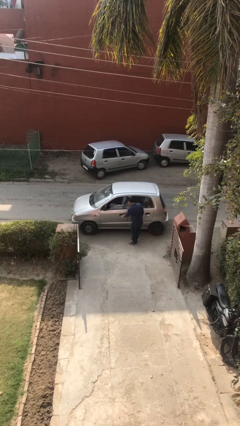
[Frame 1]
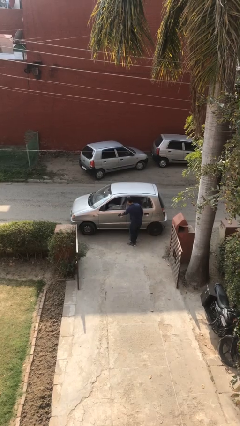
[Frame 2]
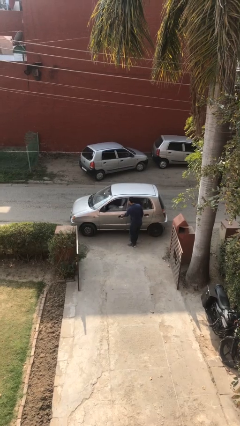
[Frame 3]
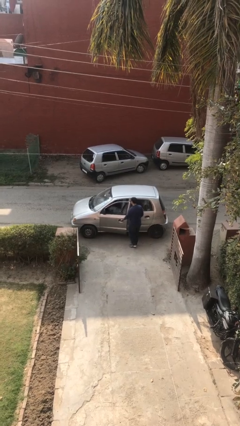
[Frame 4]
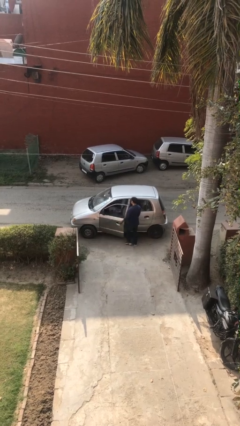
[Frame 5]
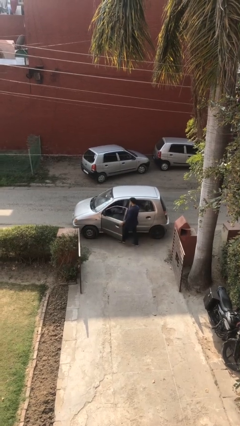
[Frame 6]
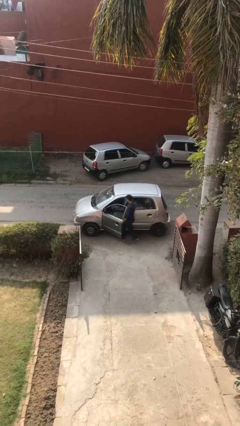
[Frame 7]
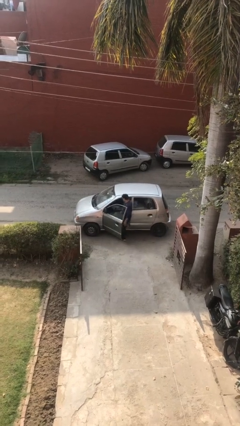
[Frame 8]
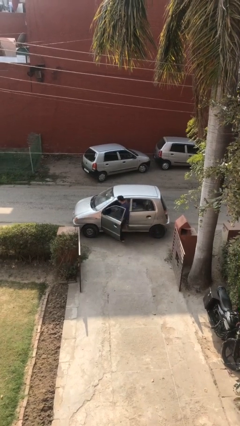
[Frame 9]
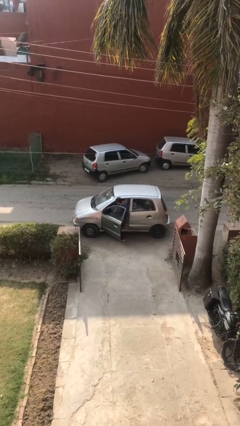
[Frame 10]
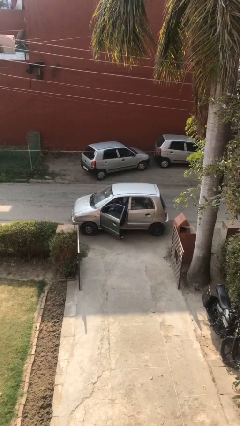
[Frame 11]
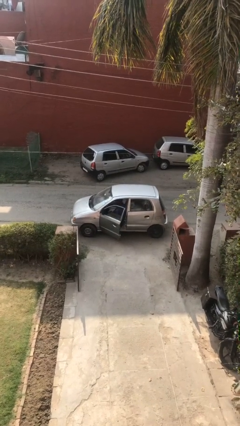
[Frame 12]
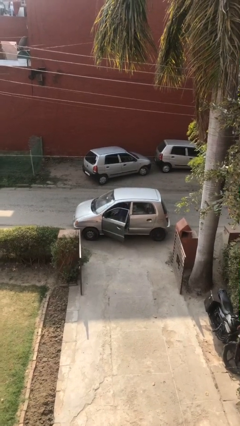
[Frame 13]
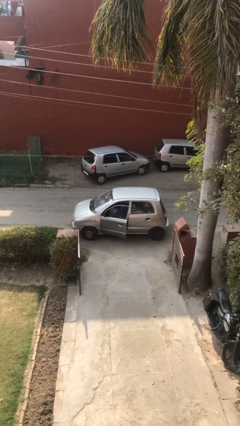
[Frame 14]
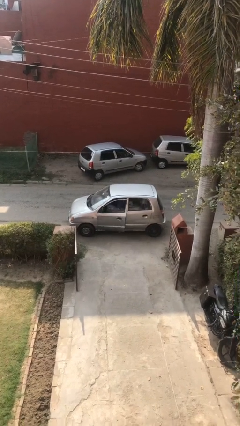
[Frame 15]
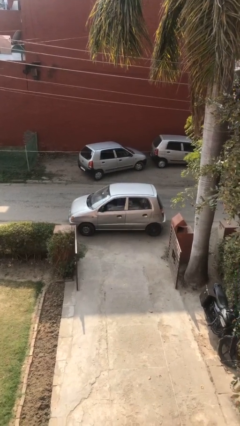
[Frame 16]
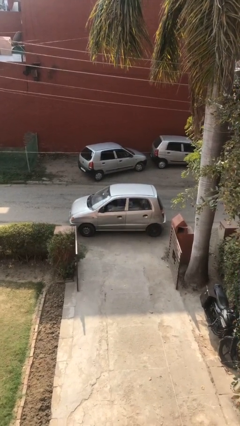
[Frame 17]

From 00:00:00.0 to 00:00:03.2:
car picks up person

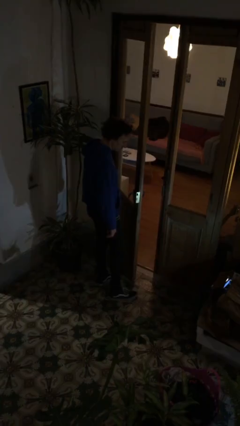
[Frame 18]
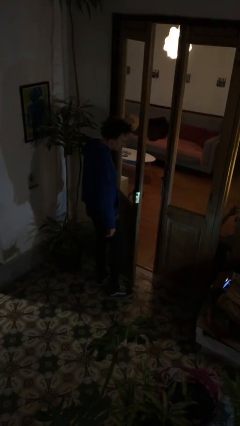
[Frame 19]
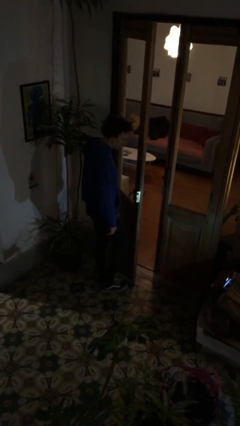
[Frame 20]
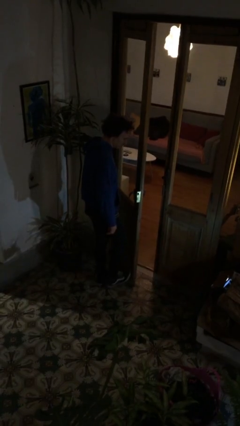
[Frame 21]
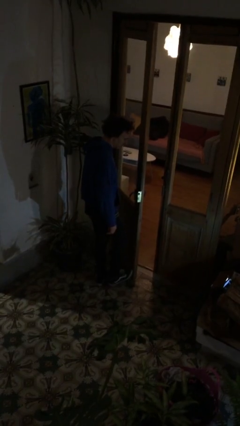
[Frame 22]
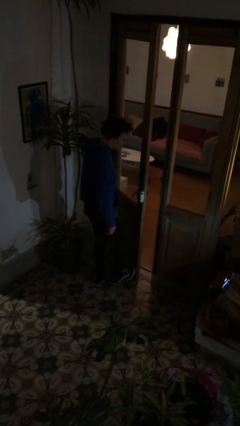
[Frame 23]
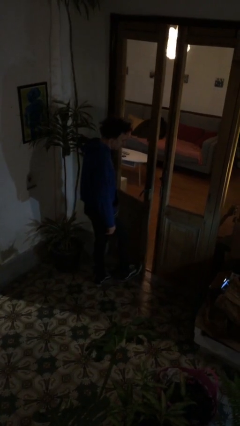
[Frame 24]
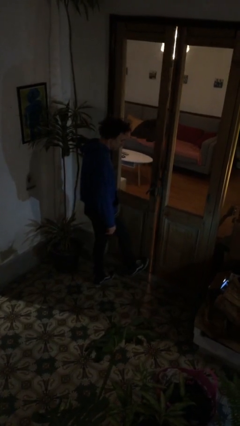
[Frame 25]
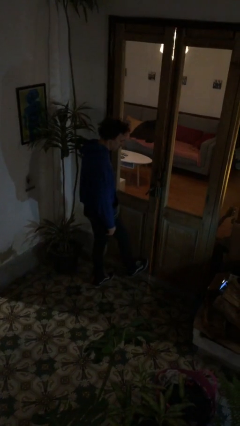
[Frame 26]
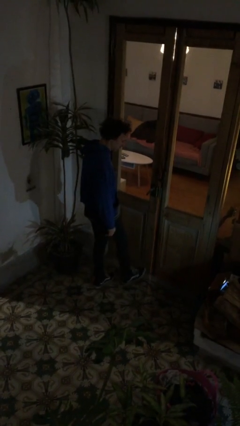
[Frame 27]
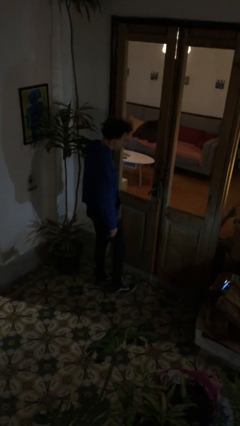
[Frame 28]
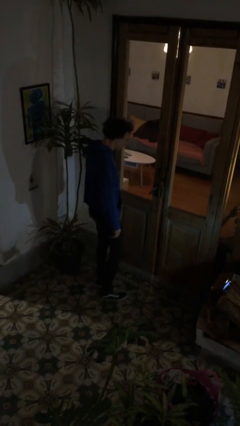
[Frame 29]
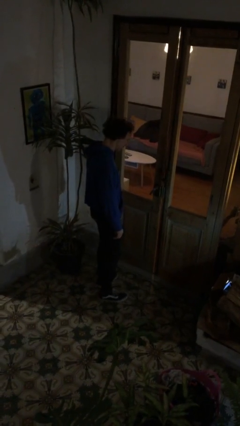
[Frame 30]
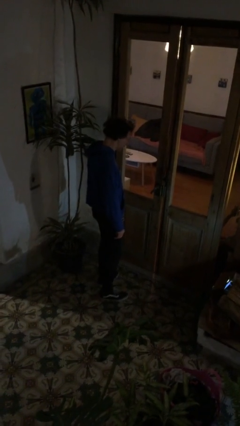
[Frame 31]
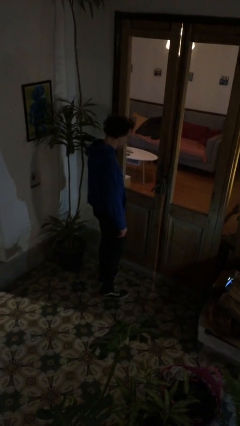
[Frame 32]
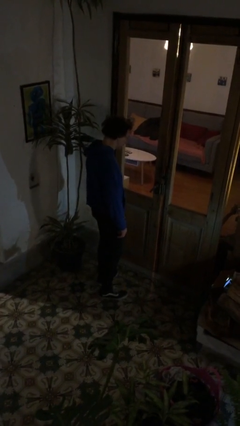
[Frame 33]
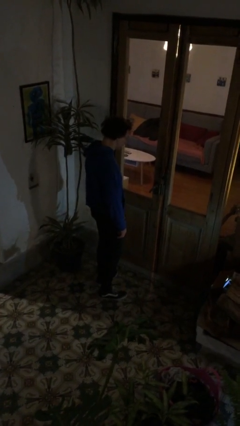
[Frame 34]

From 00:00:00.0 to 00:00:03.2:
person closes door with foot

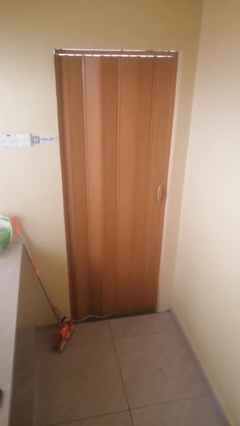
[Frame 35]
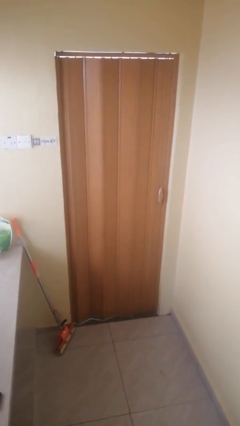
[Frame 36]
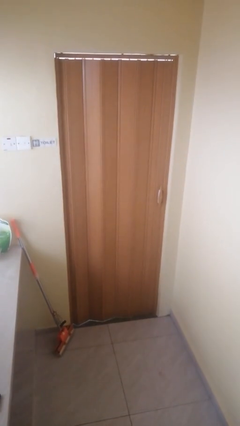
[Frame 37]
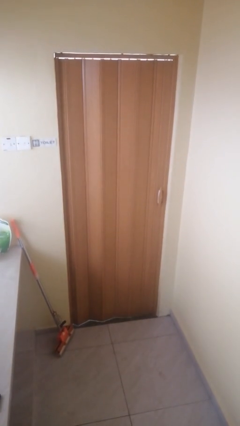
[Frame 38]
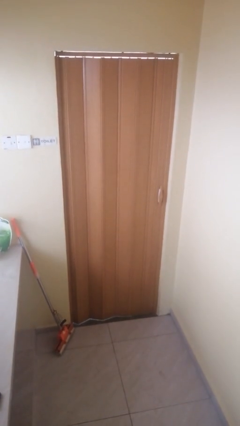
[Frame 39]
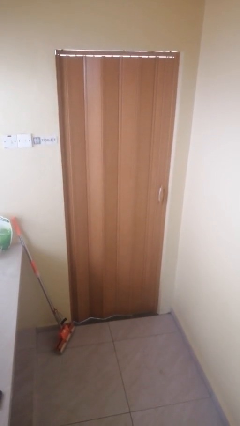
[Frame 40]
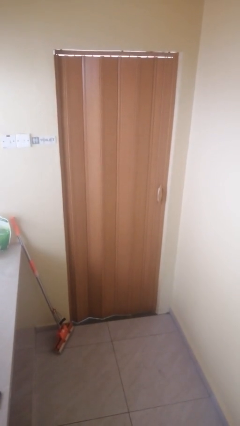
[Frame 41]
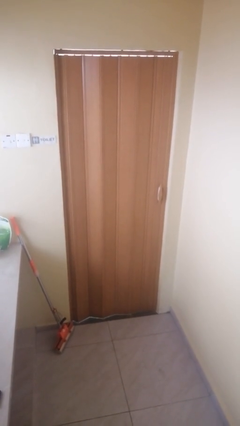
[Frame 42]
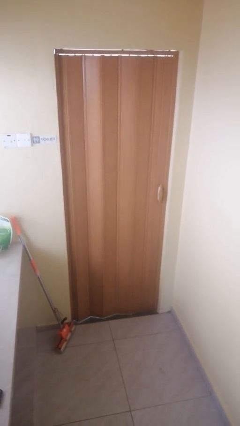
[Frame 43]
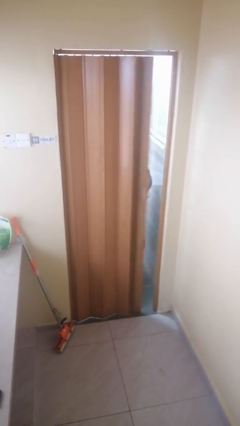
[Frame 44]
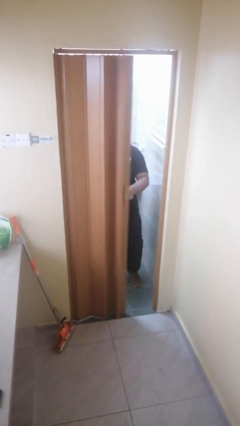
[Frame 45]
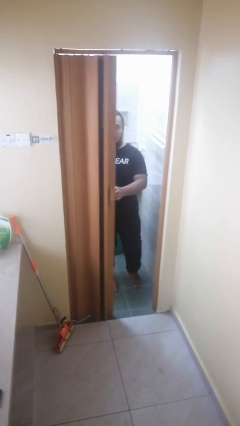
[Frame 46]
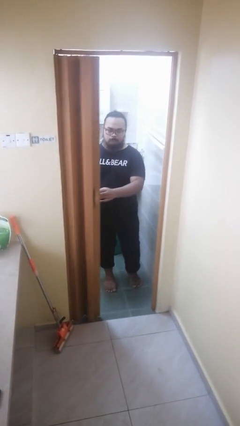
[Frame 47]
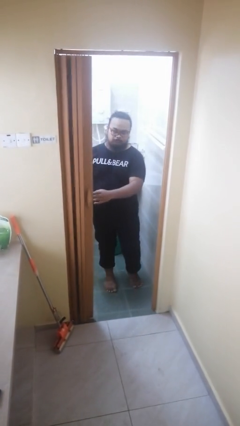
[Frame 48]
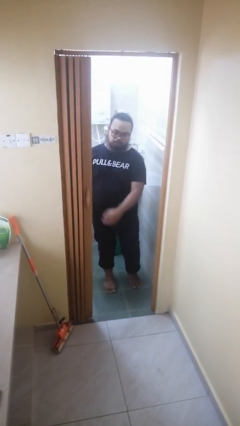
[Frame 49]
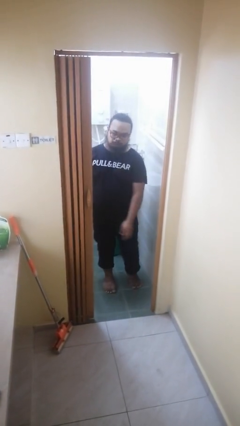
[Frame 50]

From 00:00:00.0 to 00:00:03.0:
person opens sliding door

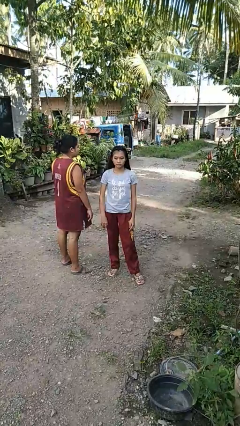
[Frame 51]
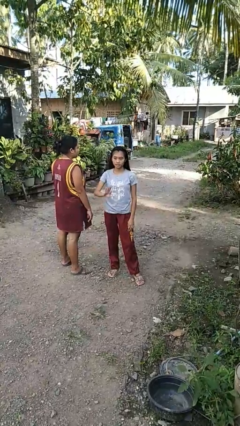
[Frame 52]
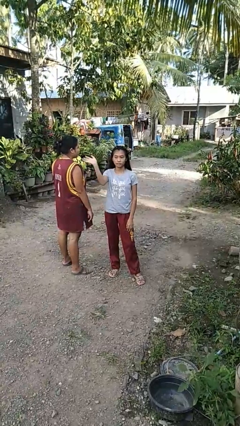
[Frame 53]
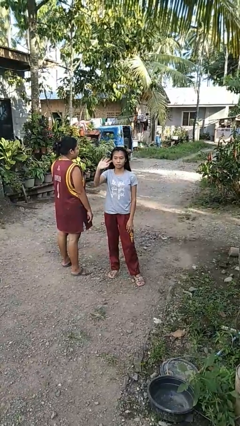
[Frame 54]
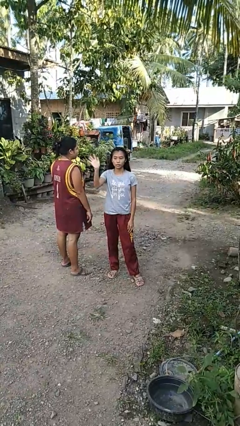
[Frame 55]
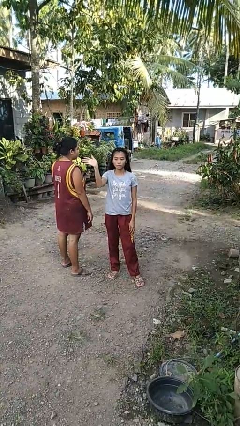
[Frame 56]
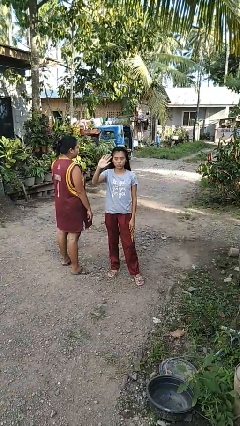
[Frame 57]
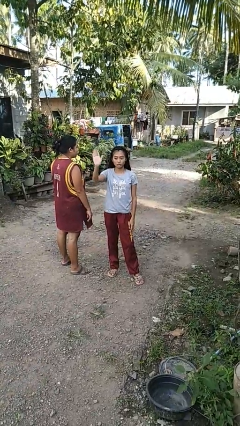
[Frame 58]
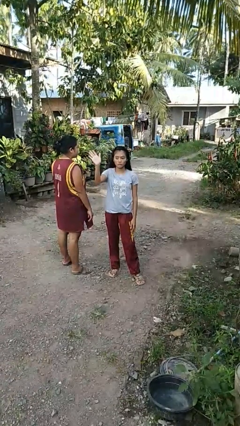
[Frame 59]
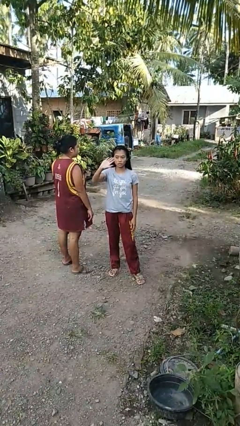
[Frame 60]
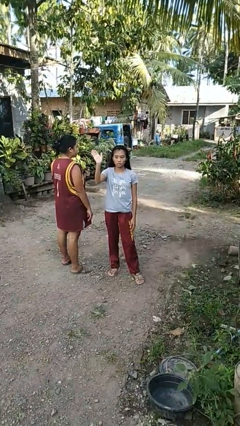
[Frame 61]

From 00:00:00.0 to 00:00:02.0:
person waves at person

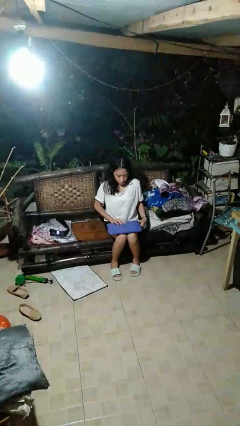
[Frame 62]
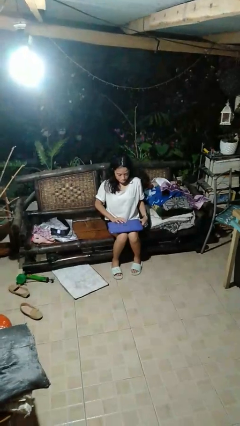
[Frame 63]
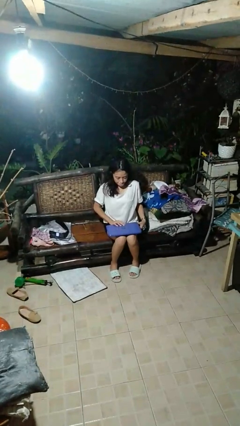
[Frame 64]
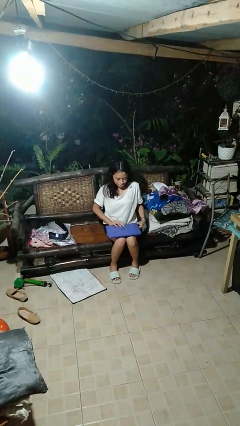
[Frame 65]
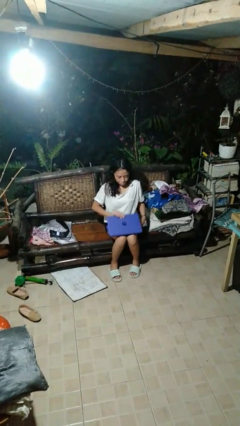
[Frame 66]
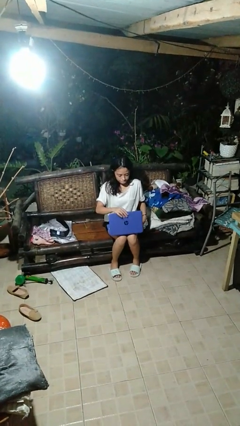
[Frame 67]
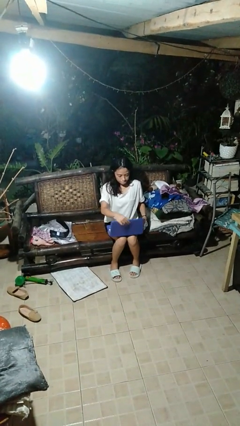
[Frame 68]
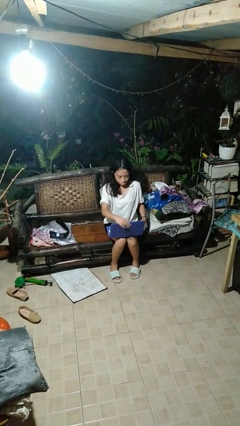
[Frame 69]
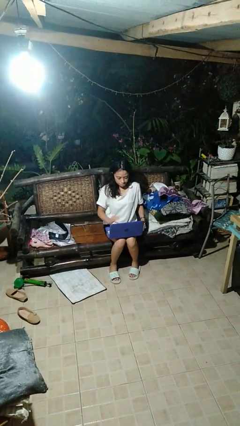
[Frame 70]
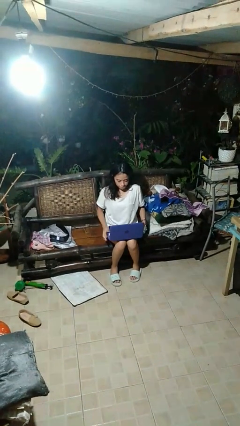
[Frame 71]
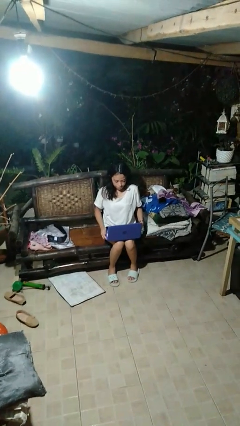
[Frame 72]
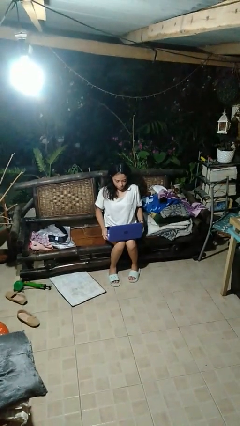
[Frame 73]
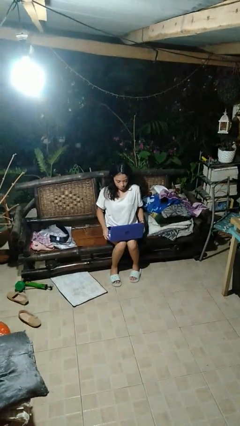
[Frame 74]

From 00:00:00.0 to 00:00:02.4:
person opens laptop

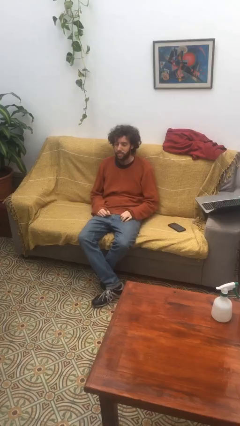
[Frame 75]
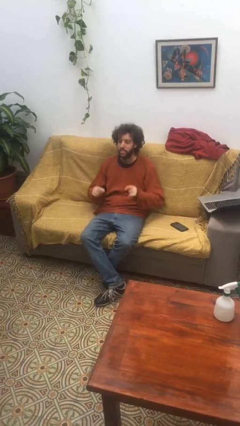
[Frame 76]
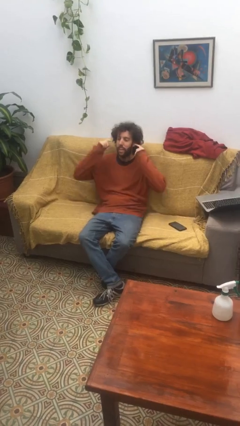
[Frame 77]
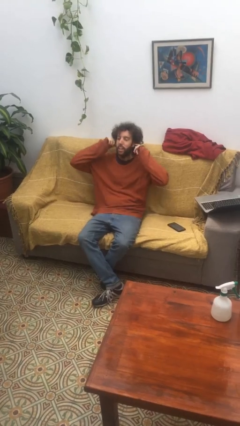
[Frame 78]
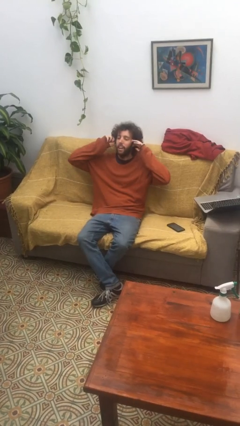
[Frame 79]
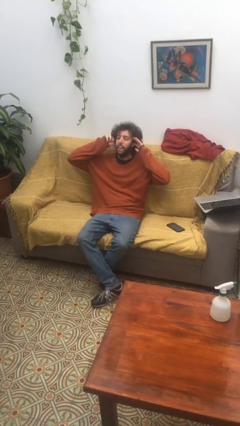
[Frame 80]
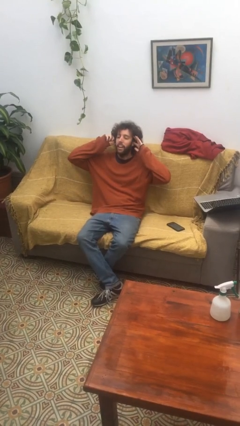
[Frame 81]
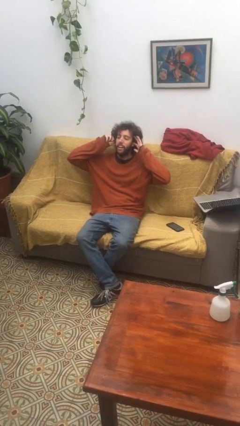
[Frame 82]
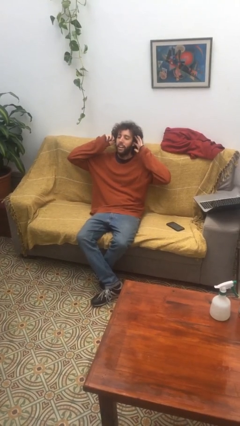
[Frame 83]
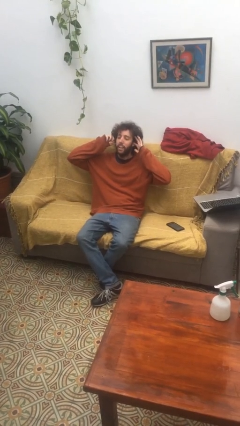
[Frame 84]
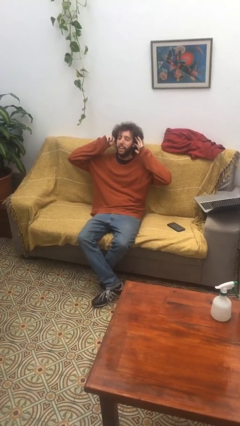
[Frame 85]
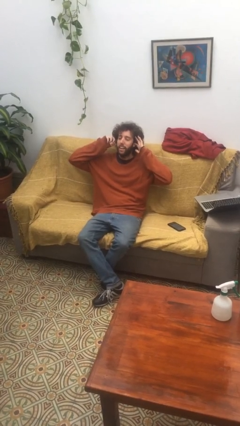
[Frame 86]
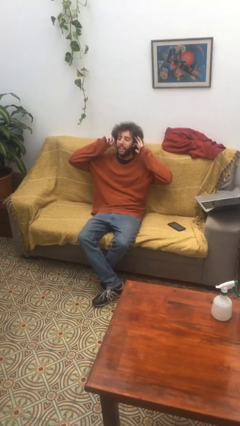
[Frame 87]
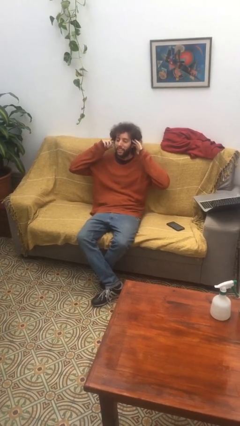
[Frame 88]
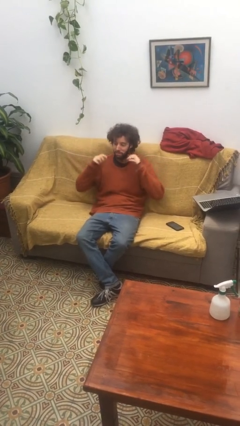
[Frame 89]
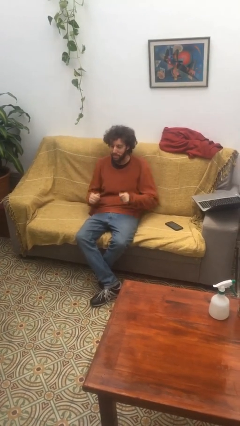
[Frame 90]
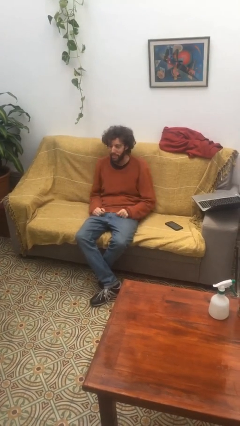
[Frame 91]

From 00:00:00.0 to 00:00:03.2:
person puts fingers in ear
